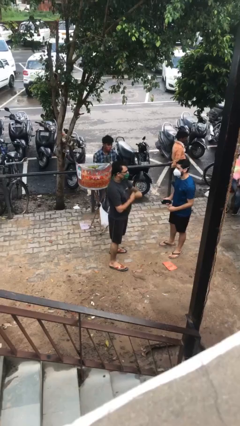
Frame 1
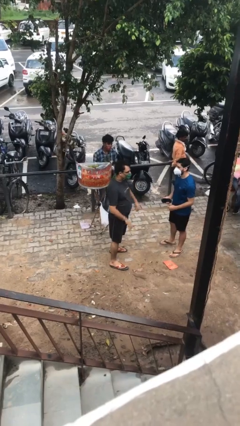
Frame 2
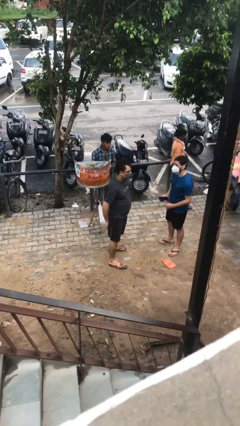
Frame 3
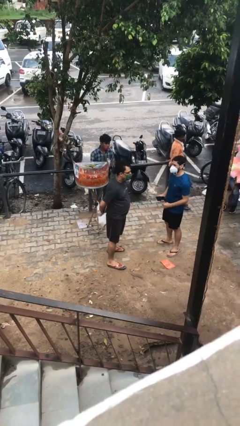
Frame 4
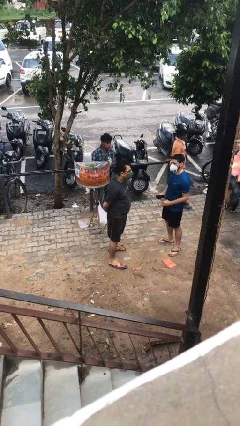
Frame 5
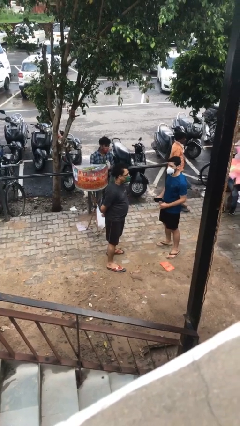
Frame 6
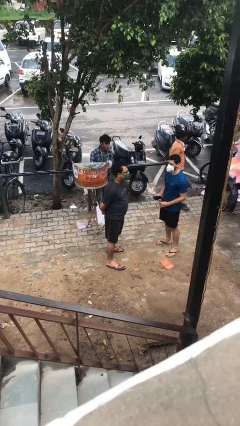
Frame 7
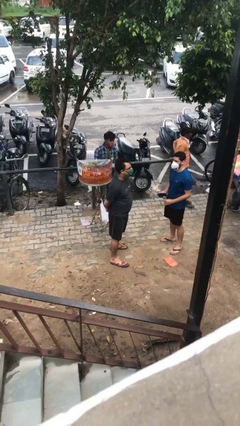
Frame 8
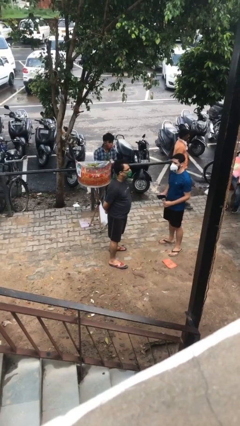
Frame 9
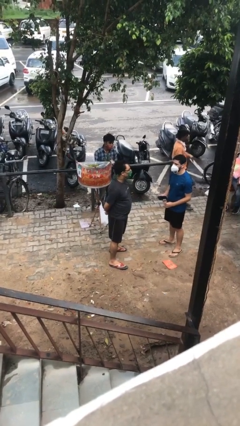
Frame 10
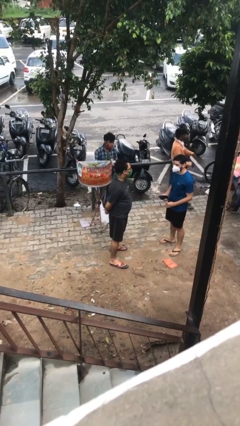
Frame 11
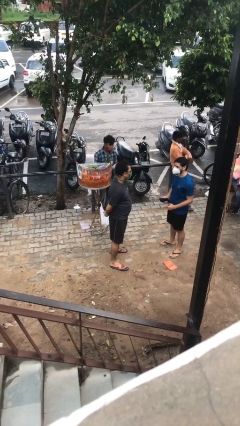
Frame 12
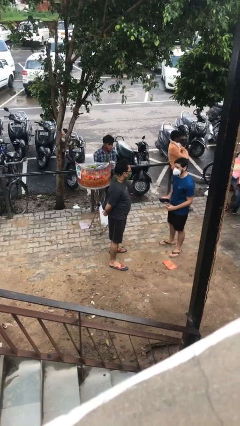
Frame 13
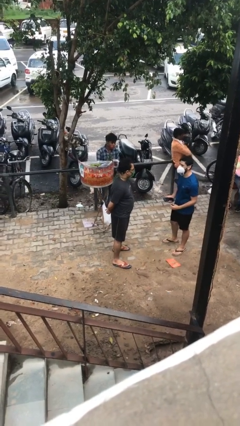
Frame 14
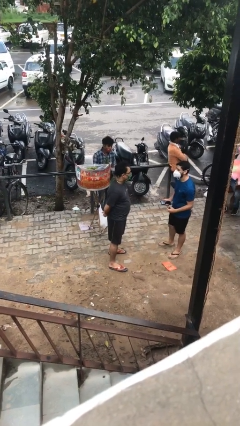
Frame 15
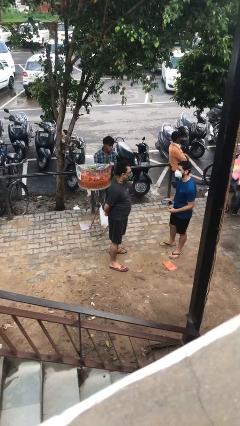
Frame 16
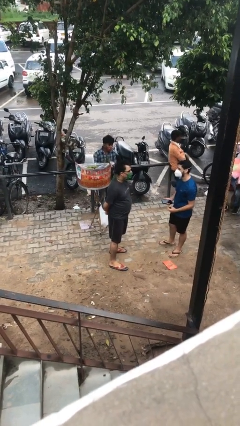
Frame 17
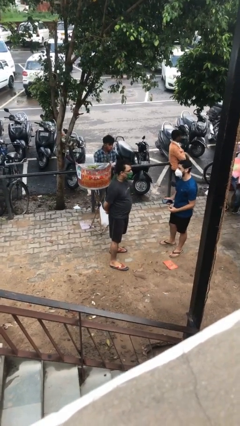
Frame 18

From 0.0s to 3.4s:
person talks to person

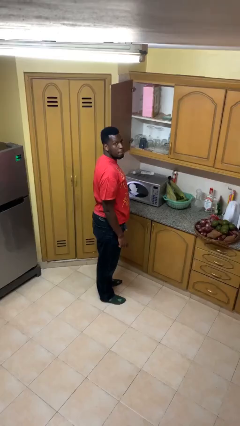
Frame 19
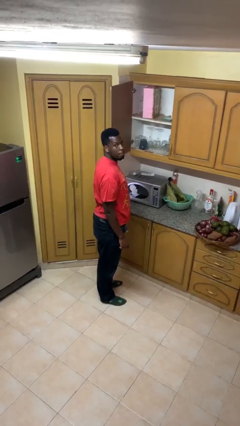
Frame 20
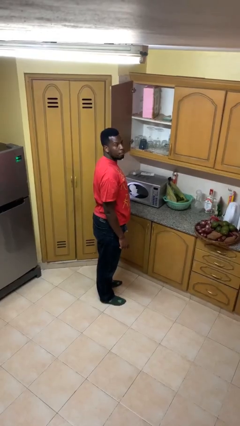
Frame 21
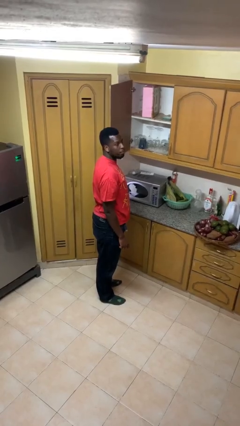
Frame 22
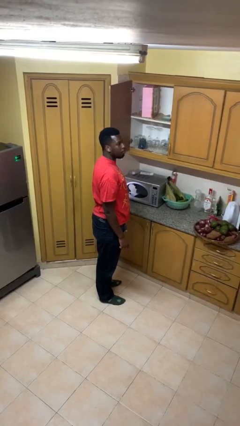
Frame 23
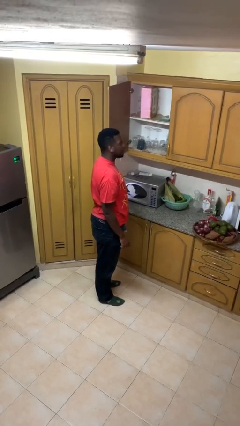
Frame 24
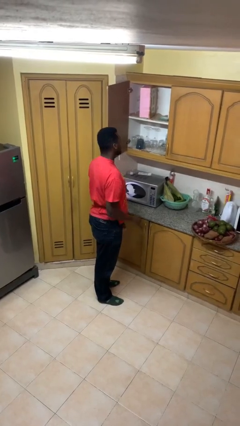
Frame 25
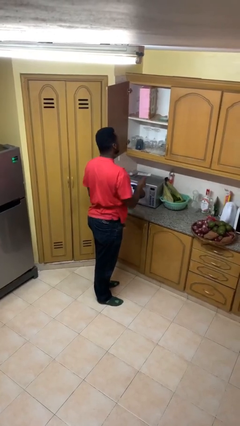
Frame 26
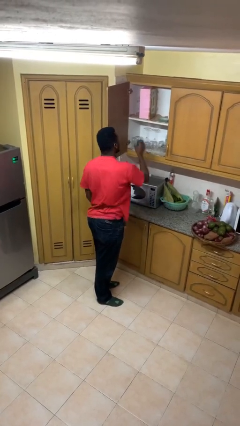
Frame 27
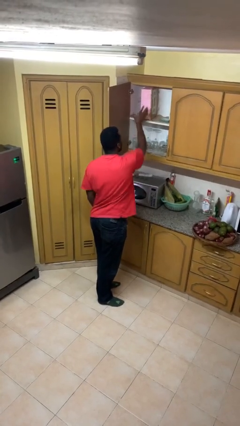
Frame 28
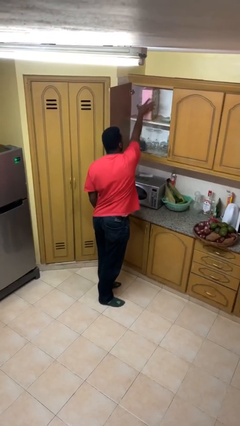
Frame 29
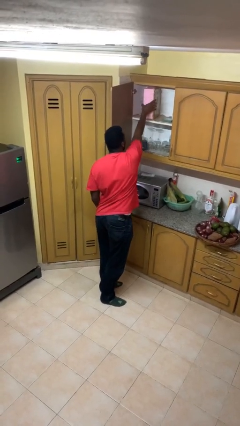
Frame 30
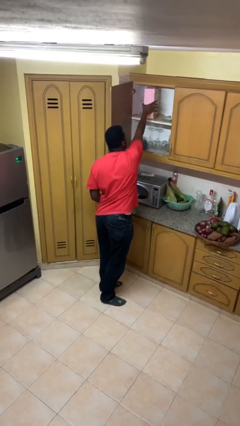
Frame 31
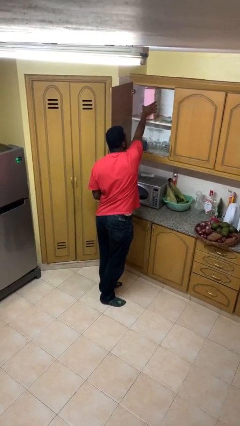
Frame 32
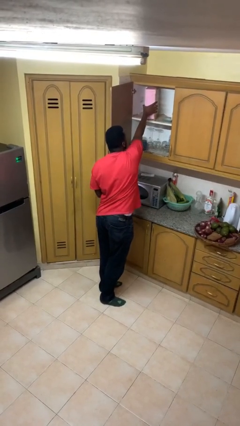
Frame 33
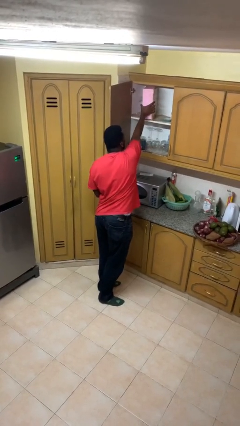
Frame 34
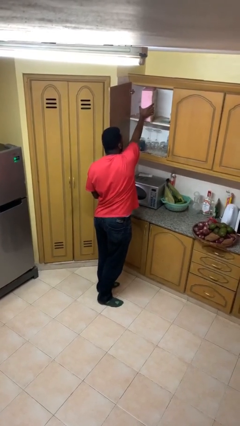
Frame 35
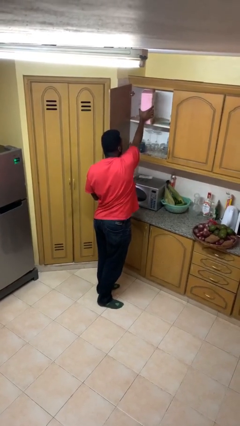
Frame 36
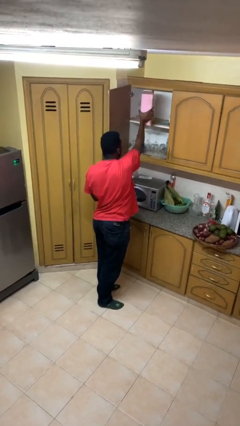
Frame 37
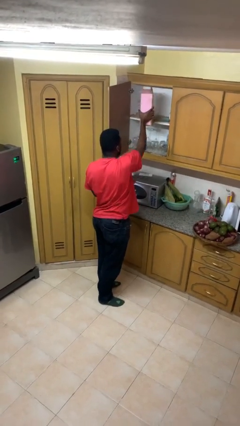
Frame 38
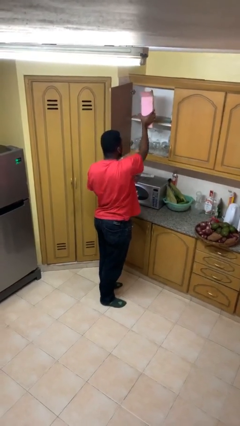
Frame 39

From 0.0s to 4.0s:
person picks up object from shelf

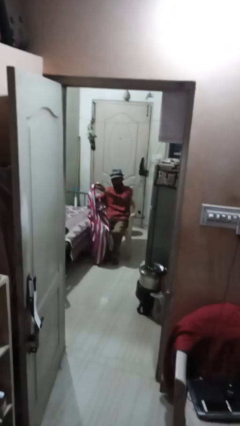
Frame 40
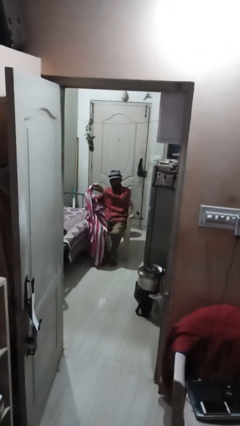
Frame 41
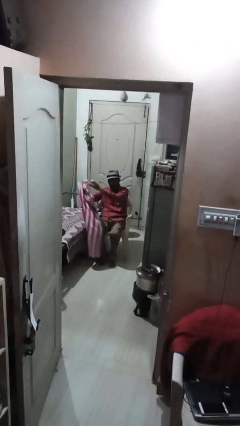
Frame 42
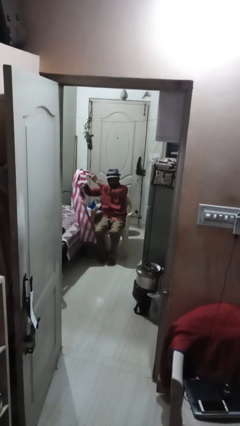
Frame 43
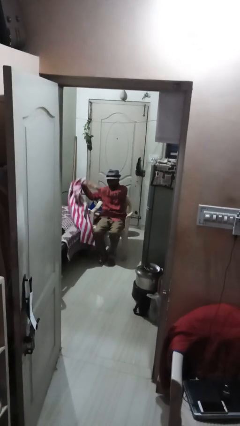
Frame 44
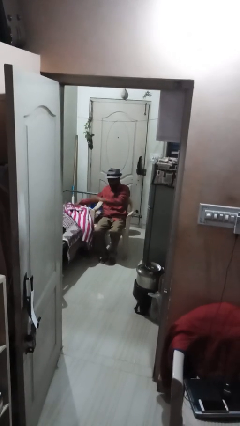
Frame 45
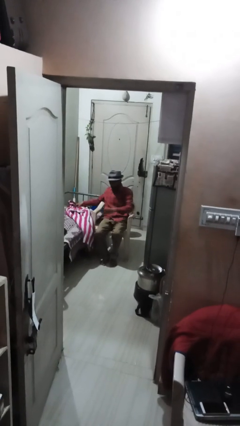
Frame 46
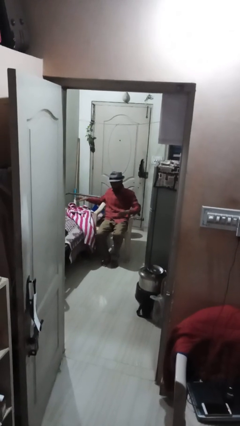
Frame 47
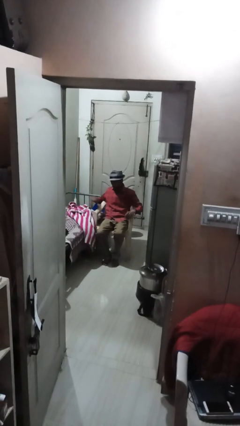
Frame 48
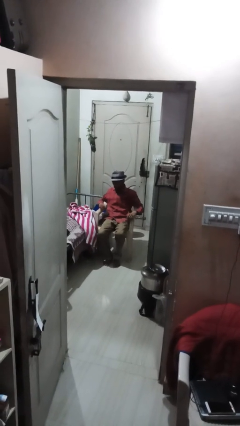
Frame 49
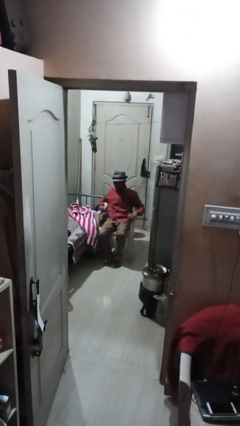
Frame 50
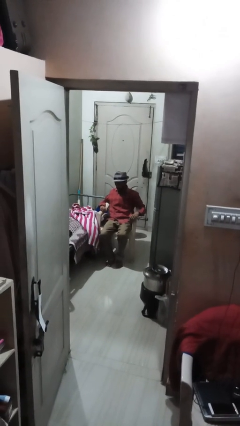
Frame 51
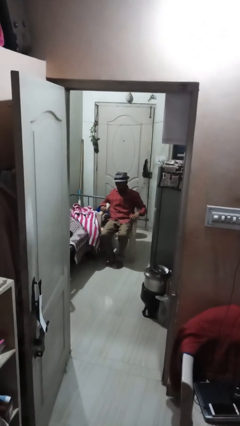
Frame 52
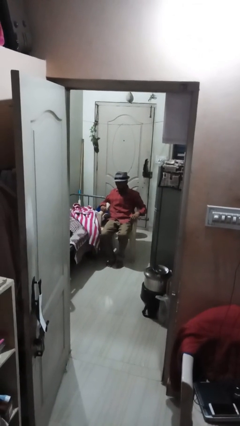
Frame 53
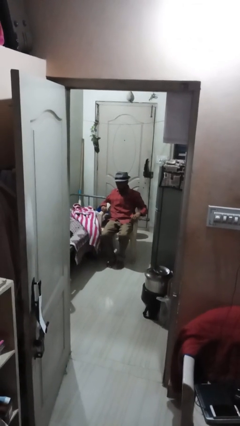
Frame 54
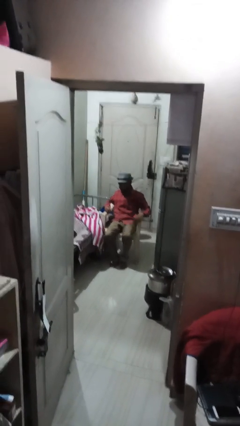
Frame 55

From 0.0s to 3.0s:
person uncovers with blanket

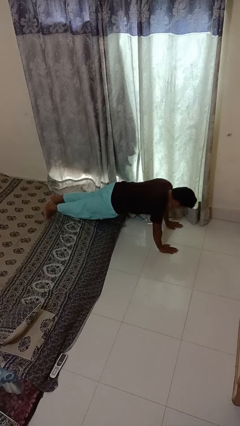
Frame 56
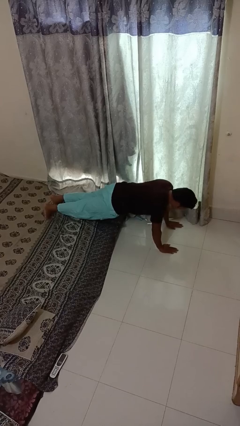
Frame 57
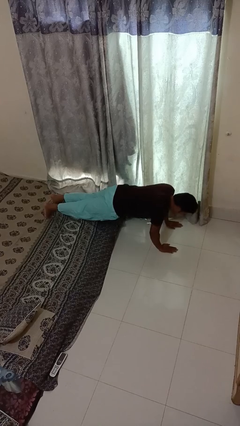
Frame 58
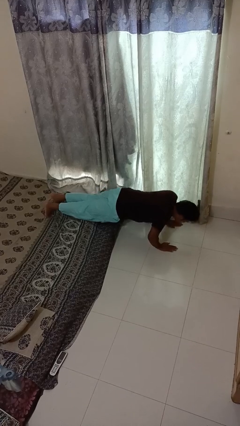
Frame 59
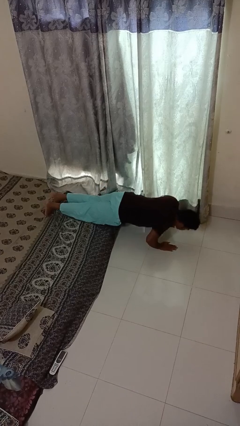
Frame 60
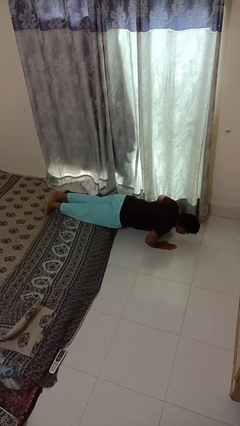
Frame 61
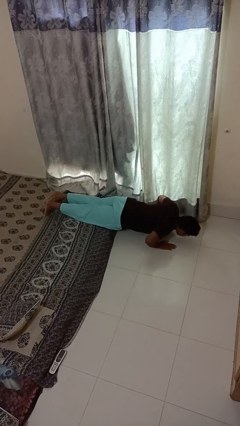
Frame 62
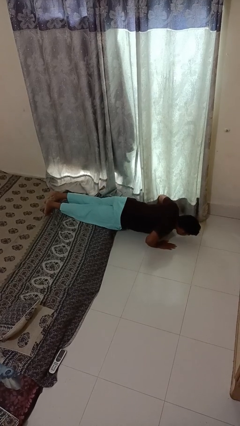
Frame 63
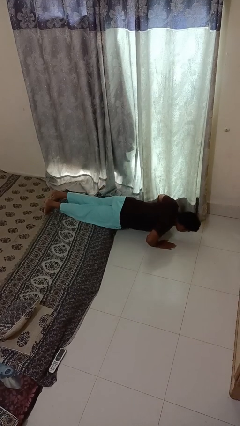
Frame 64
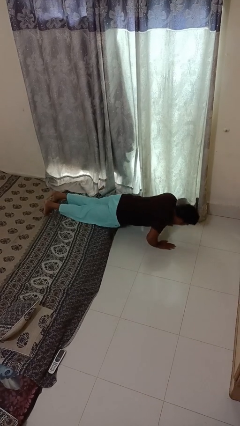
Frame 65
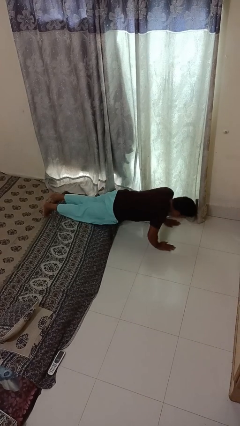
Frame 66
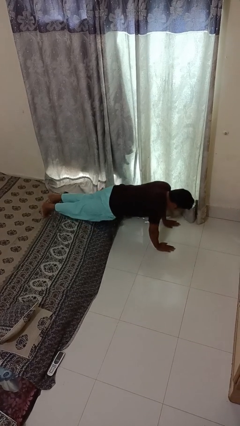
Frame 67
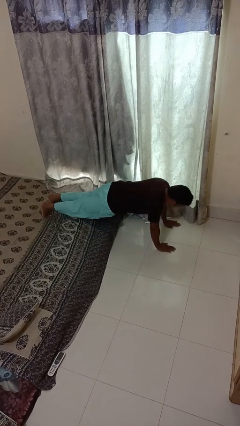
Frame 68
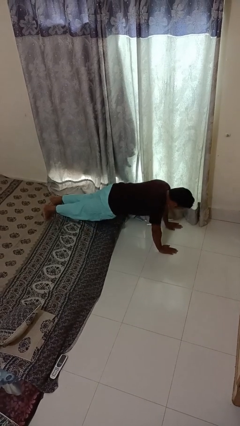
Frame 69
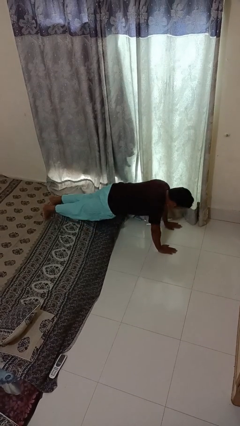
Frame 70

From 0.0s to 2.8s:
person exercises with pushup

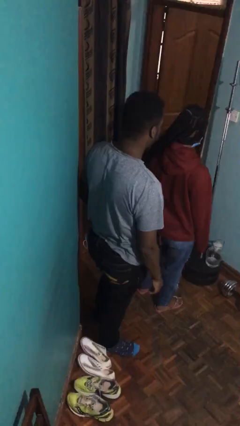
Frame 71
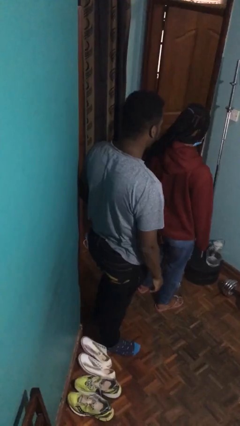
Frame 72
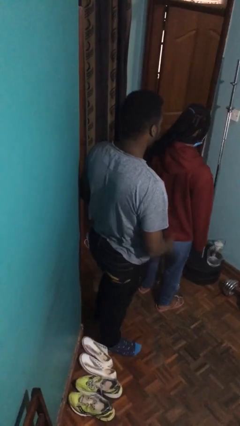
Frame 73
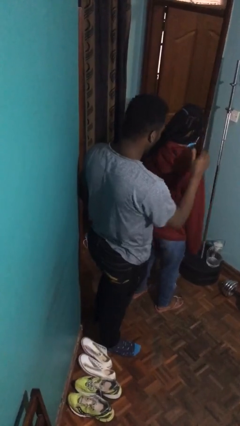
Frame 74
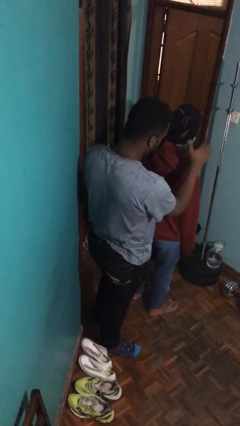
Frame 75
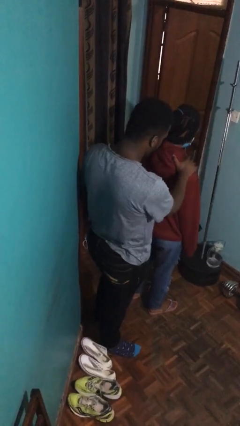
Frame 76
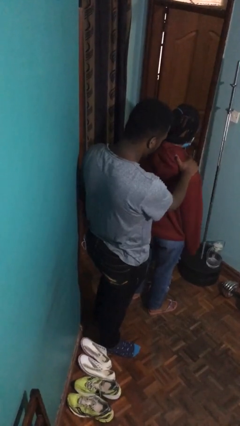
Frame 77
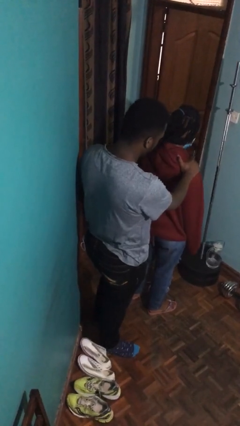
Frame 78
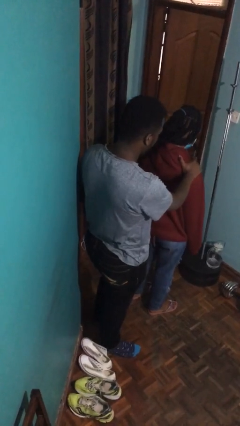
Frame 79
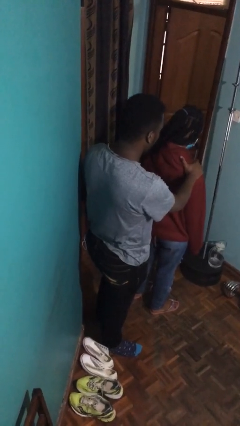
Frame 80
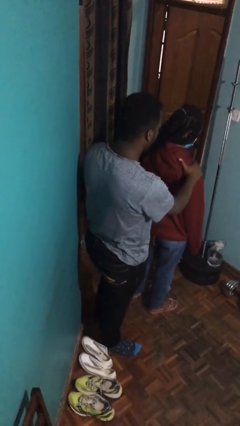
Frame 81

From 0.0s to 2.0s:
person grabs person by shoulder

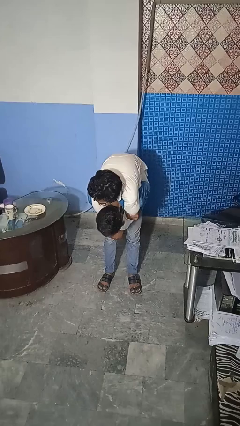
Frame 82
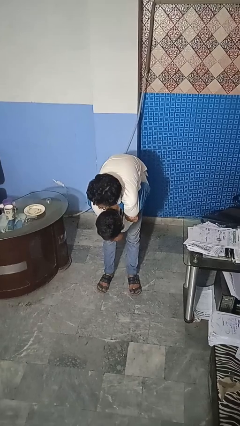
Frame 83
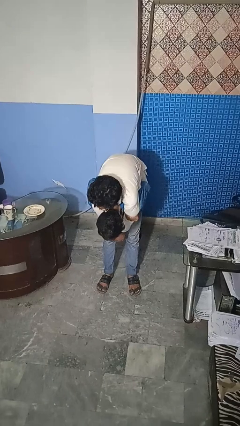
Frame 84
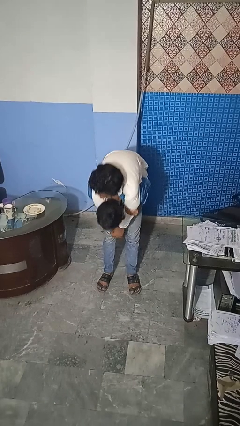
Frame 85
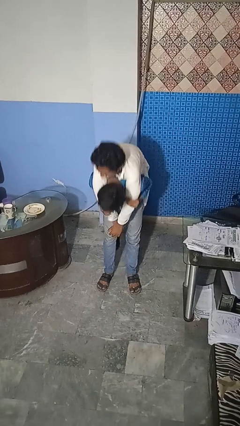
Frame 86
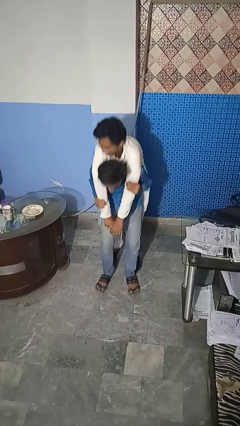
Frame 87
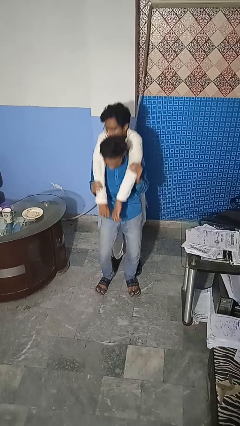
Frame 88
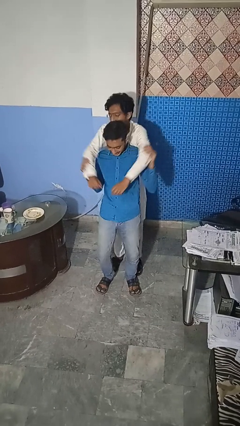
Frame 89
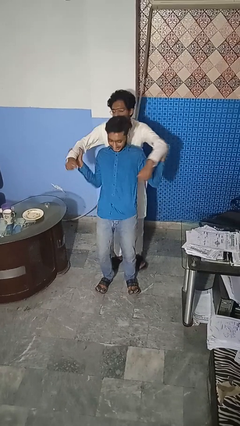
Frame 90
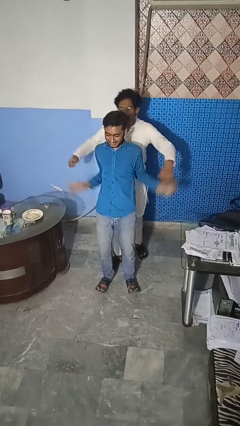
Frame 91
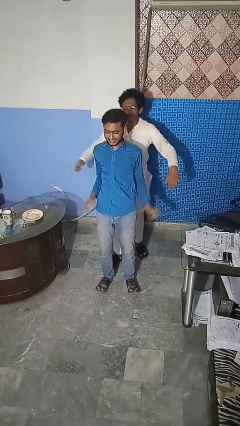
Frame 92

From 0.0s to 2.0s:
person puts down person

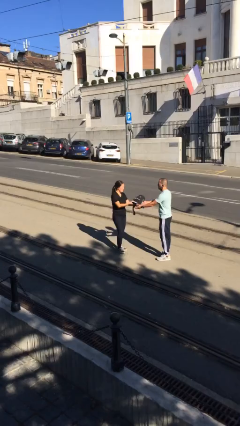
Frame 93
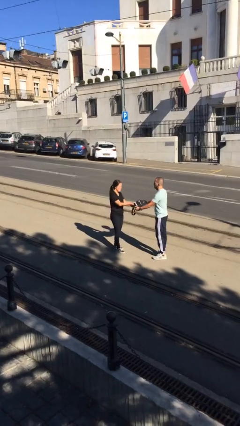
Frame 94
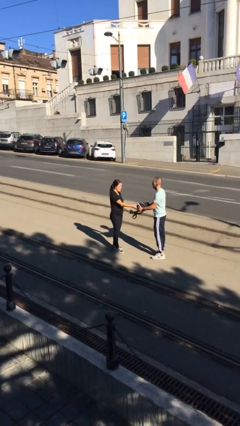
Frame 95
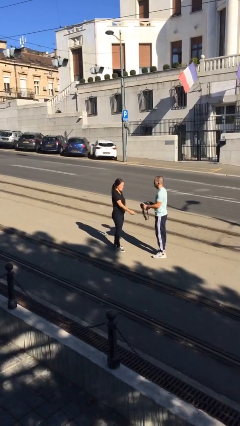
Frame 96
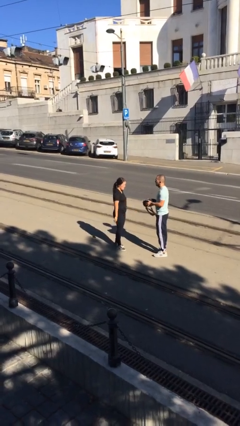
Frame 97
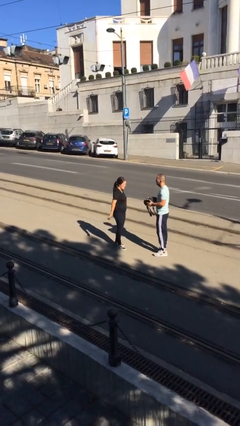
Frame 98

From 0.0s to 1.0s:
person transfers object to person
